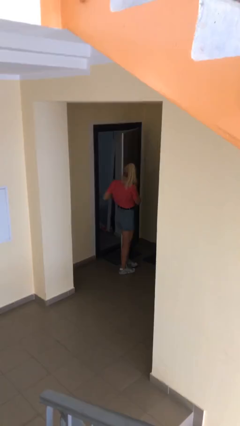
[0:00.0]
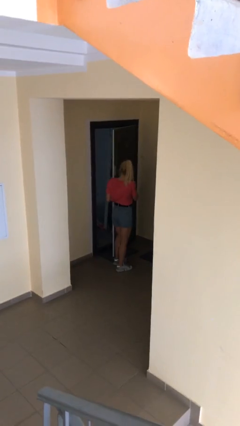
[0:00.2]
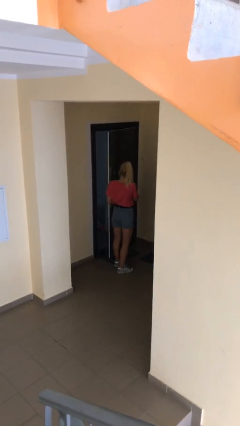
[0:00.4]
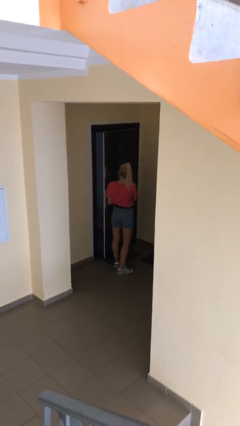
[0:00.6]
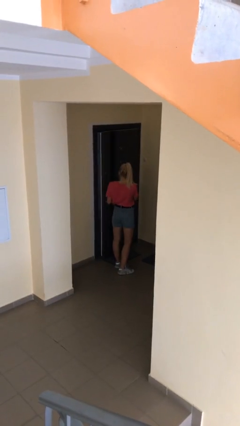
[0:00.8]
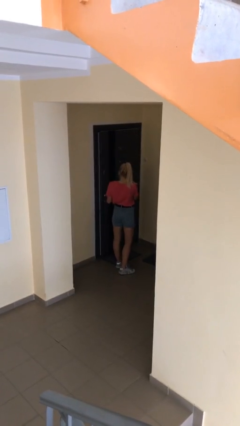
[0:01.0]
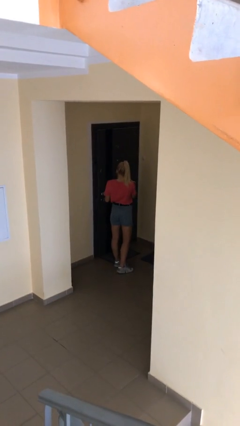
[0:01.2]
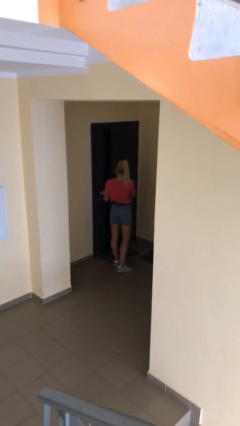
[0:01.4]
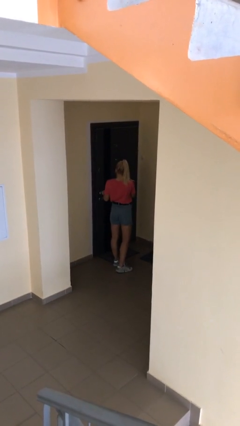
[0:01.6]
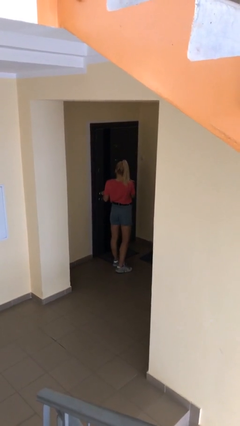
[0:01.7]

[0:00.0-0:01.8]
person closes facility door

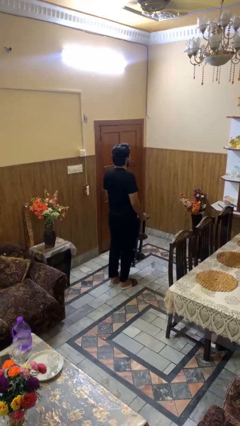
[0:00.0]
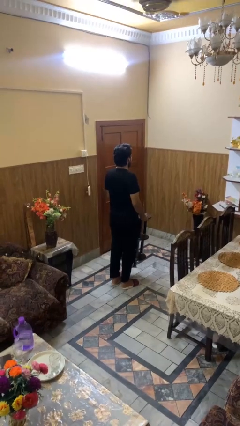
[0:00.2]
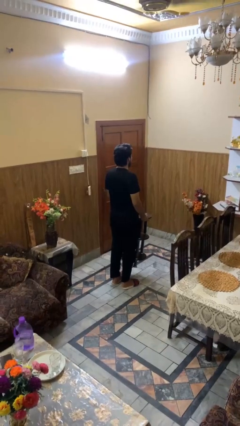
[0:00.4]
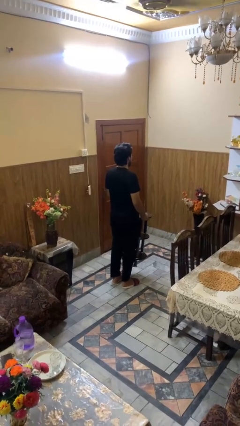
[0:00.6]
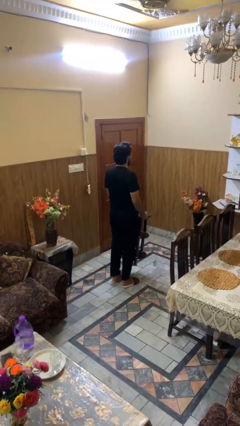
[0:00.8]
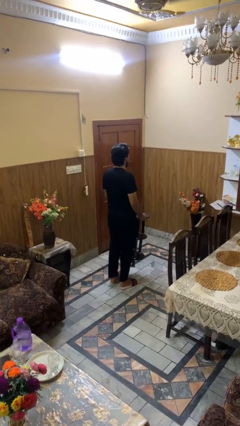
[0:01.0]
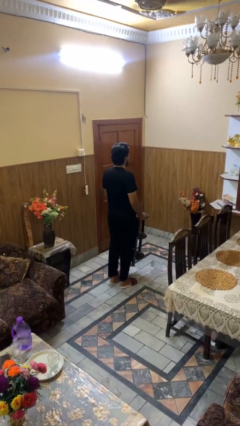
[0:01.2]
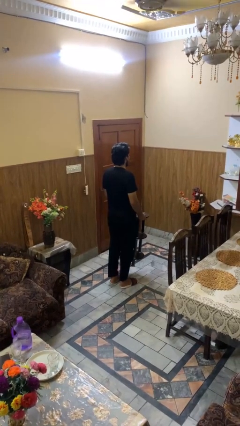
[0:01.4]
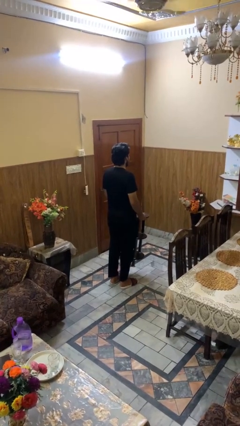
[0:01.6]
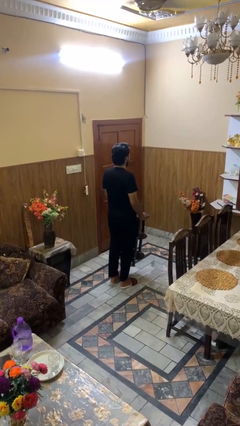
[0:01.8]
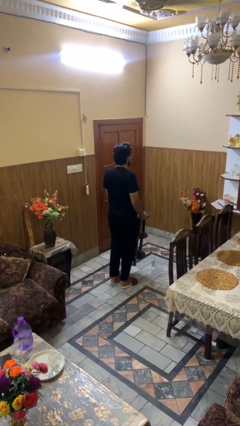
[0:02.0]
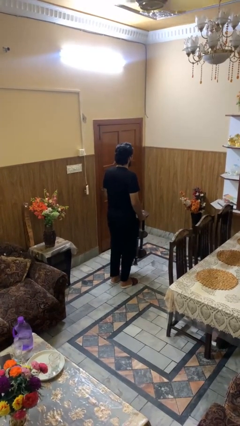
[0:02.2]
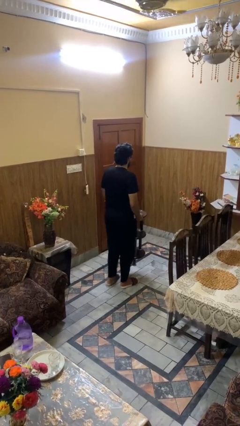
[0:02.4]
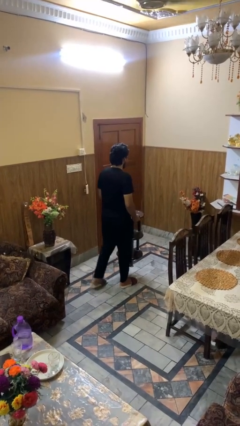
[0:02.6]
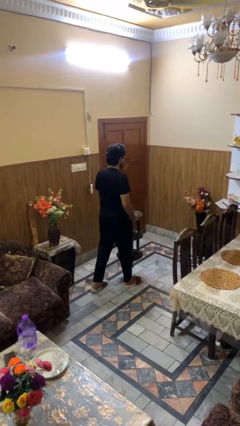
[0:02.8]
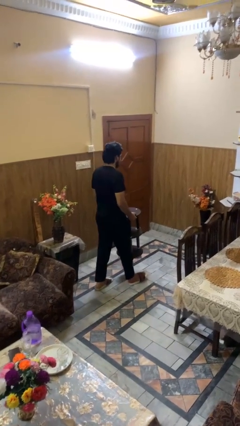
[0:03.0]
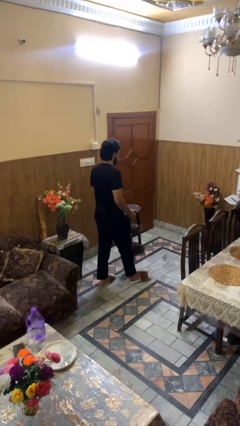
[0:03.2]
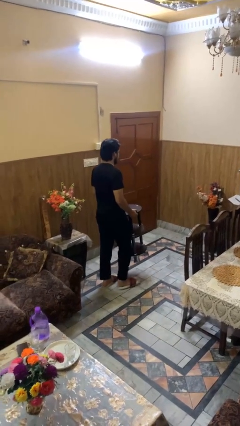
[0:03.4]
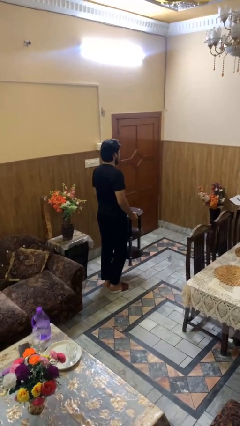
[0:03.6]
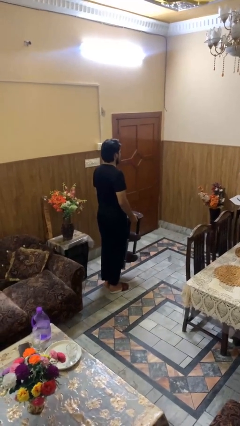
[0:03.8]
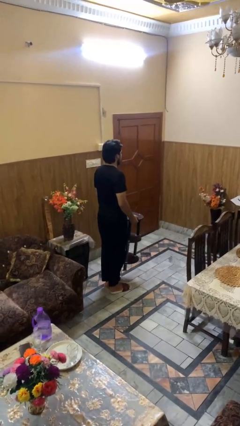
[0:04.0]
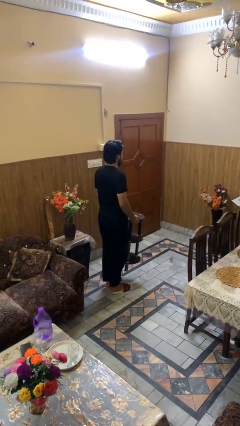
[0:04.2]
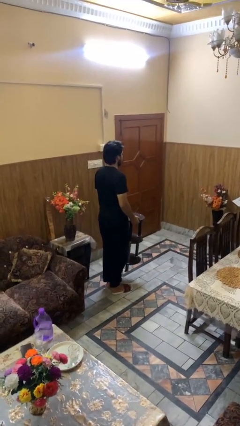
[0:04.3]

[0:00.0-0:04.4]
person carries furniture

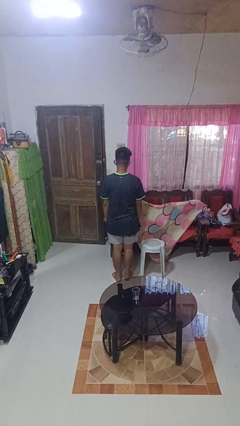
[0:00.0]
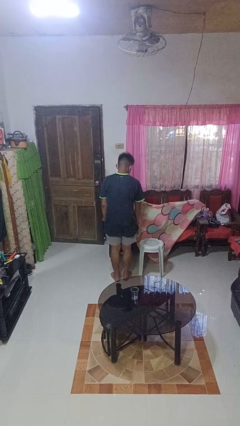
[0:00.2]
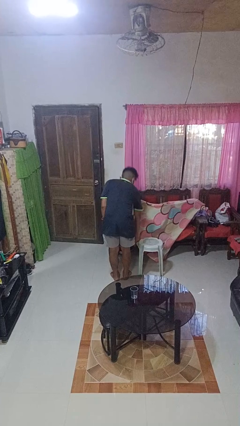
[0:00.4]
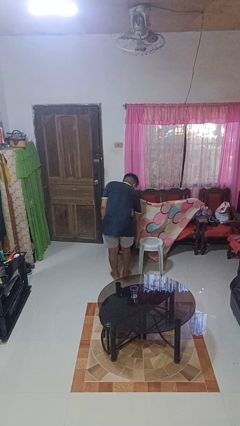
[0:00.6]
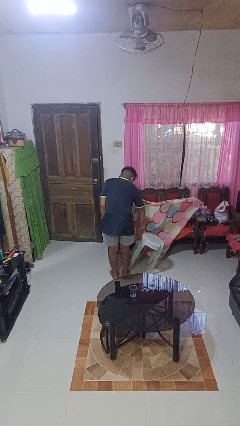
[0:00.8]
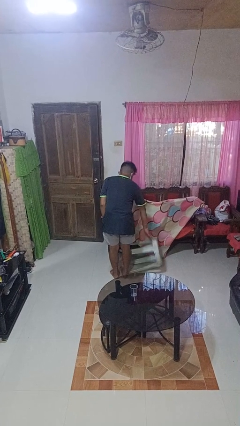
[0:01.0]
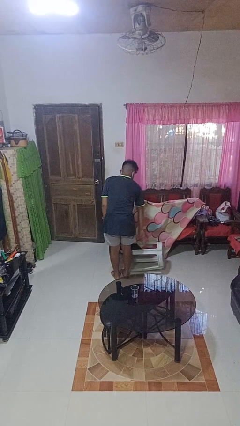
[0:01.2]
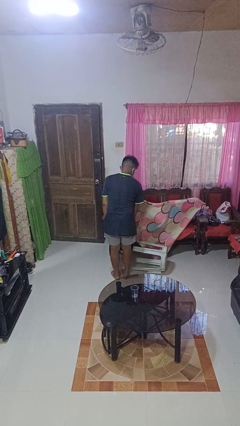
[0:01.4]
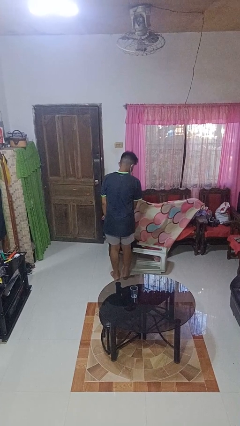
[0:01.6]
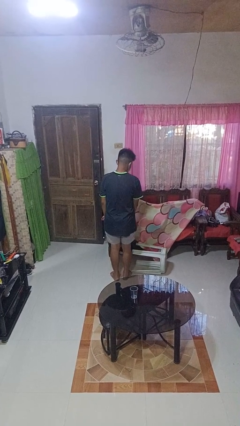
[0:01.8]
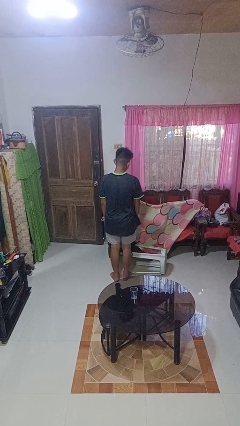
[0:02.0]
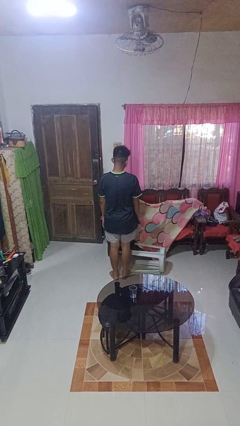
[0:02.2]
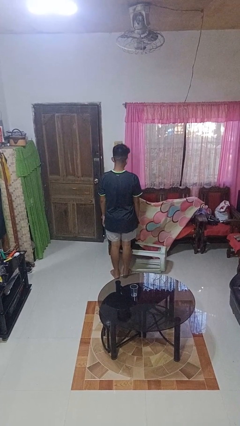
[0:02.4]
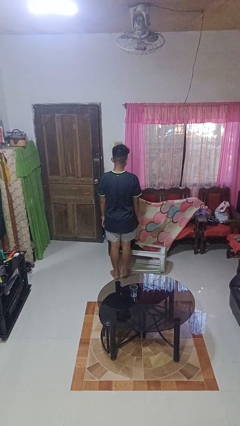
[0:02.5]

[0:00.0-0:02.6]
person knocks over furniture

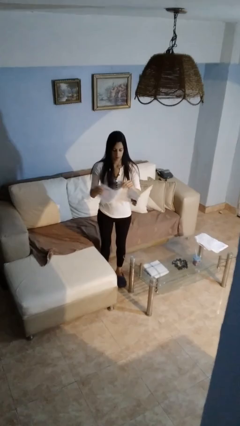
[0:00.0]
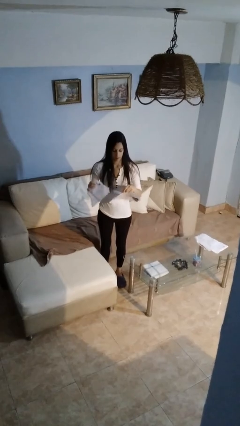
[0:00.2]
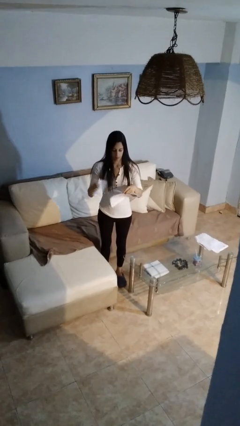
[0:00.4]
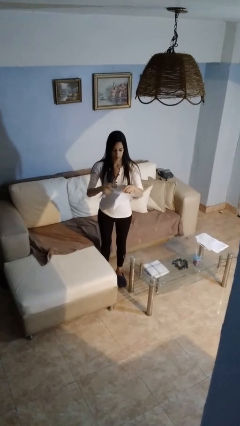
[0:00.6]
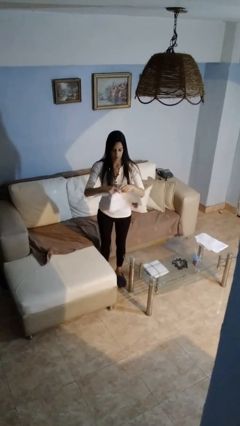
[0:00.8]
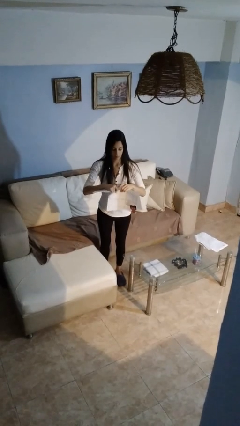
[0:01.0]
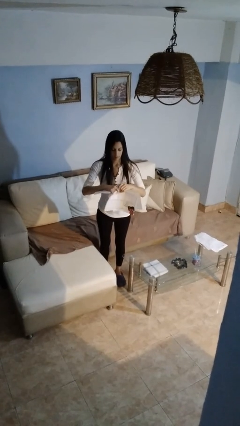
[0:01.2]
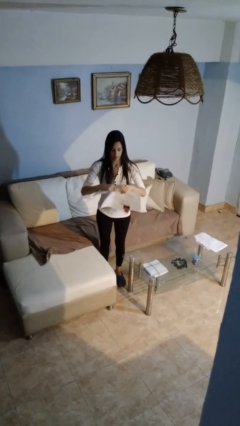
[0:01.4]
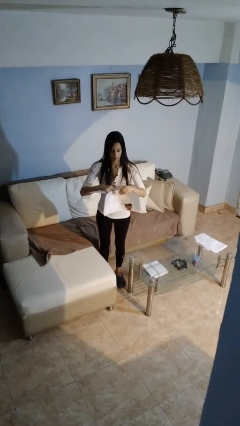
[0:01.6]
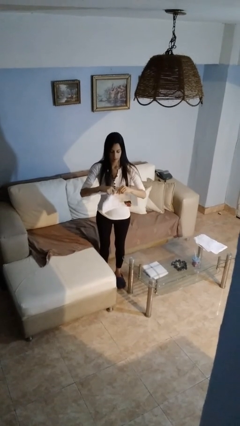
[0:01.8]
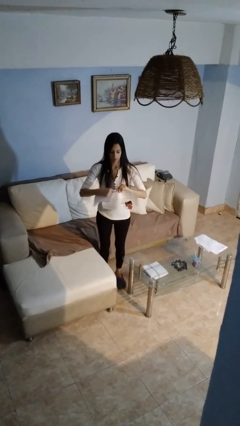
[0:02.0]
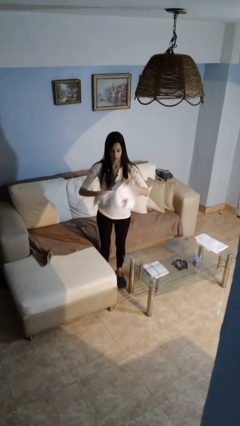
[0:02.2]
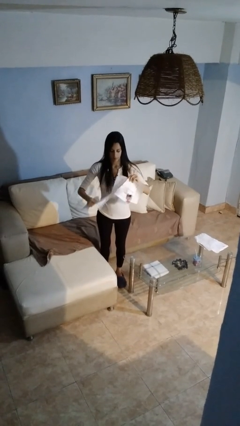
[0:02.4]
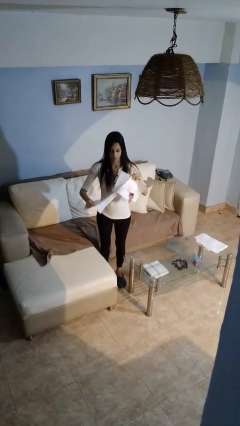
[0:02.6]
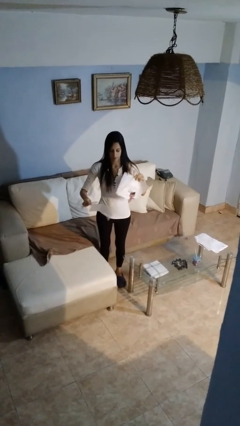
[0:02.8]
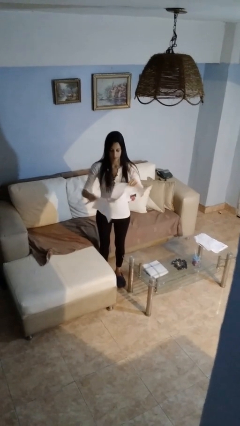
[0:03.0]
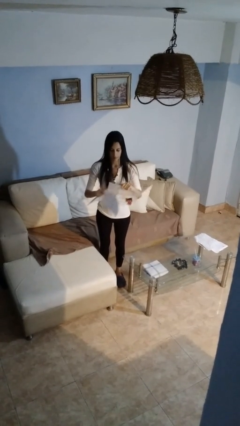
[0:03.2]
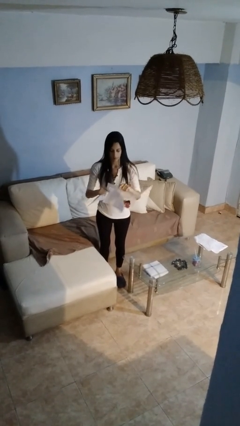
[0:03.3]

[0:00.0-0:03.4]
person tears paper

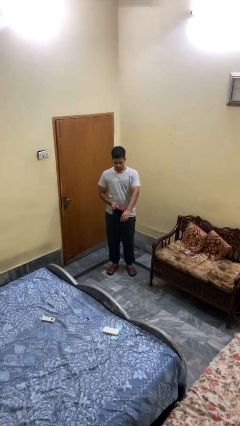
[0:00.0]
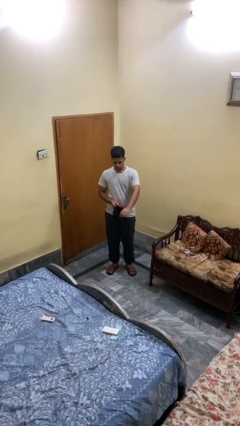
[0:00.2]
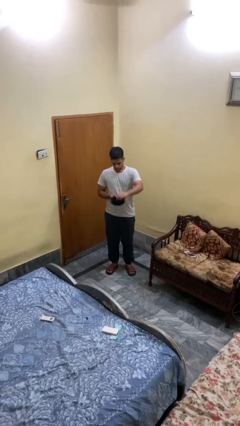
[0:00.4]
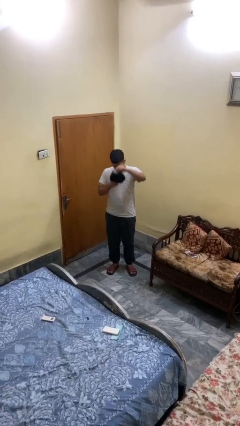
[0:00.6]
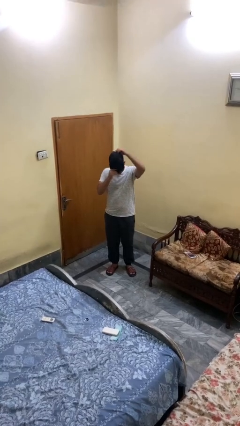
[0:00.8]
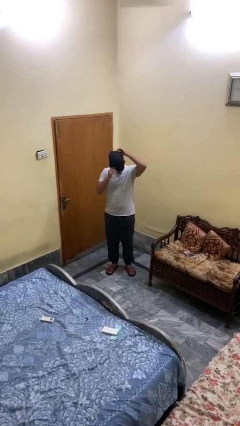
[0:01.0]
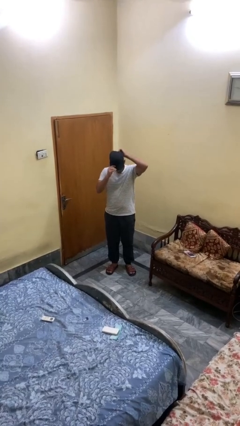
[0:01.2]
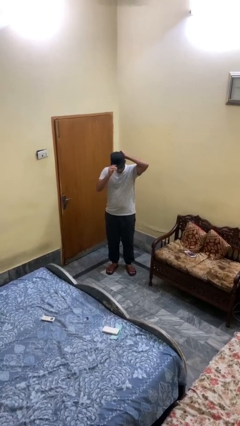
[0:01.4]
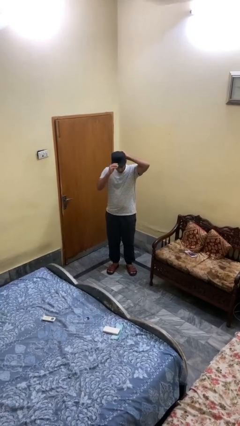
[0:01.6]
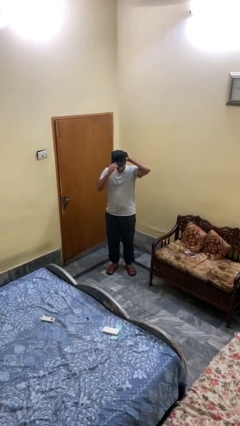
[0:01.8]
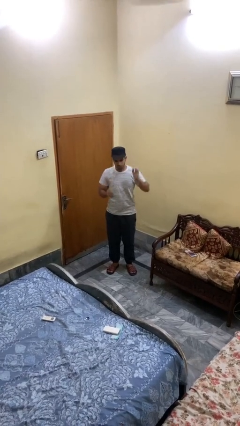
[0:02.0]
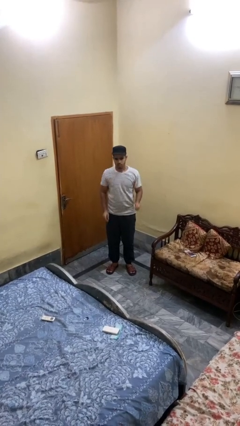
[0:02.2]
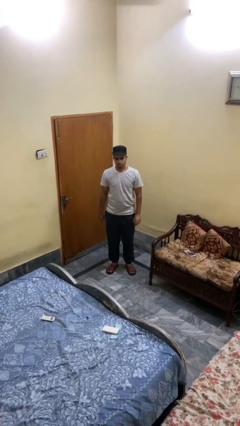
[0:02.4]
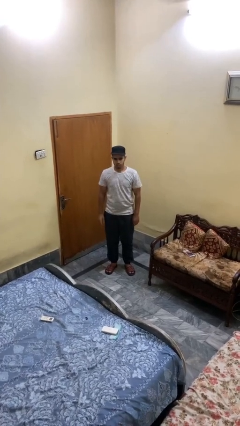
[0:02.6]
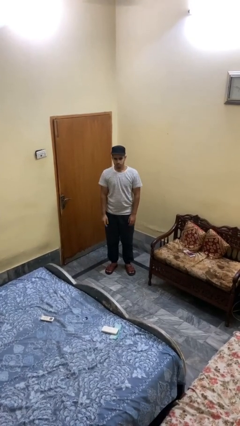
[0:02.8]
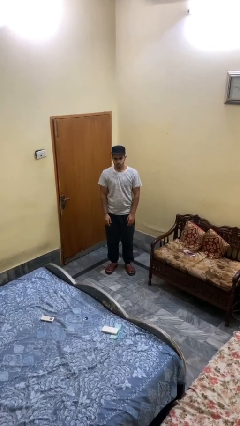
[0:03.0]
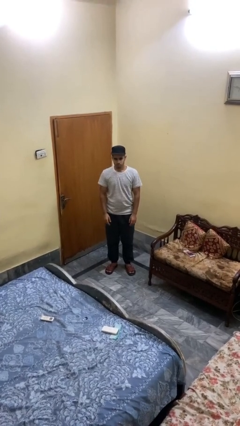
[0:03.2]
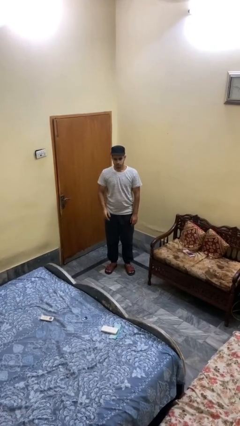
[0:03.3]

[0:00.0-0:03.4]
person puts on hat

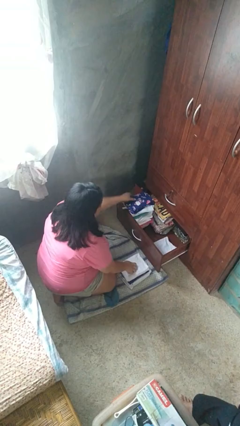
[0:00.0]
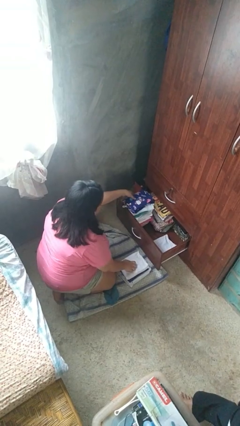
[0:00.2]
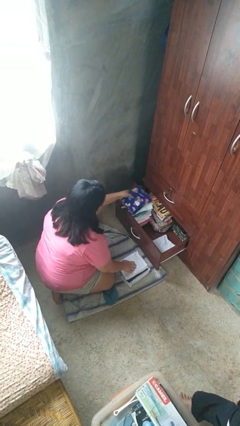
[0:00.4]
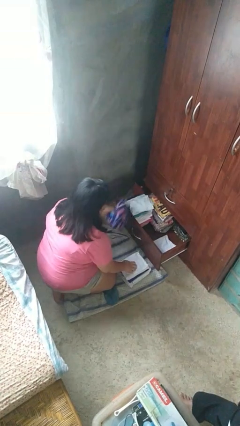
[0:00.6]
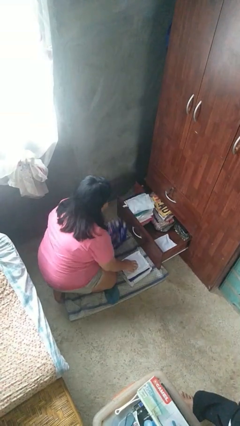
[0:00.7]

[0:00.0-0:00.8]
person takes clothes from dresser

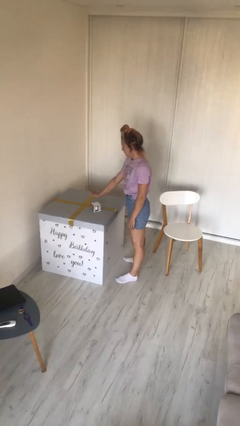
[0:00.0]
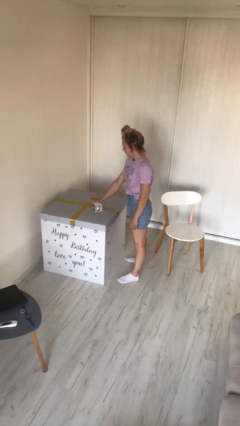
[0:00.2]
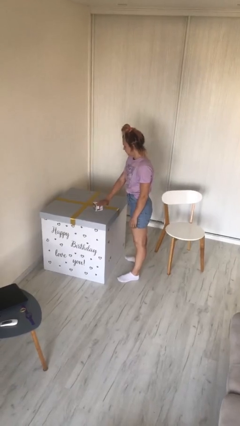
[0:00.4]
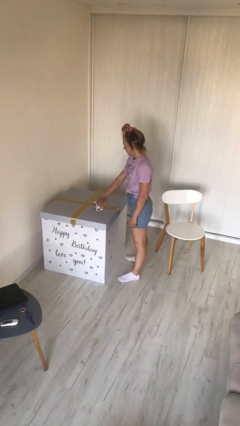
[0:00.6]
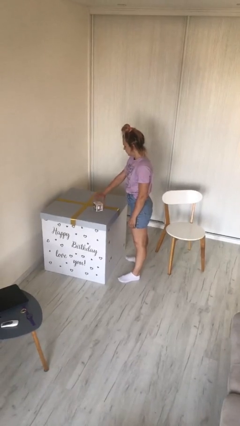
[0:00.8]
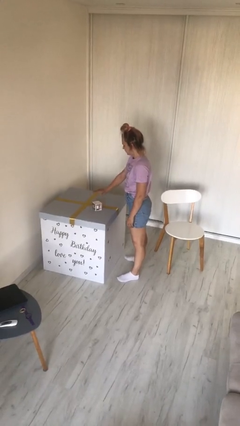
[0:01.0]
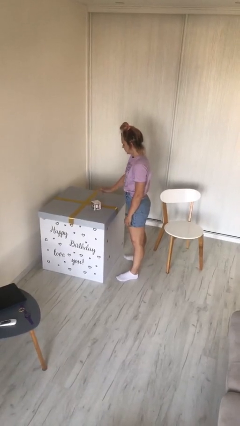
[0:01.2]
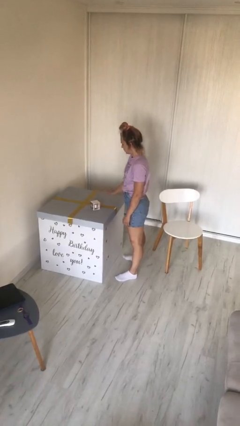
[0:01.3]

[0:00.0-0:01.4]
person waves hand over object
